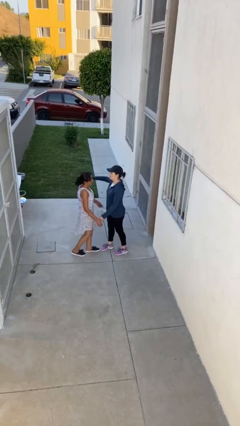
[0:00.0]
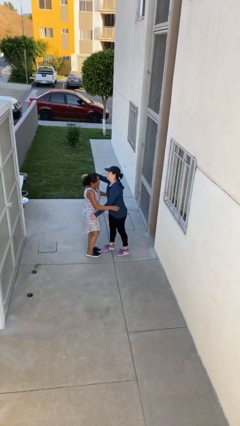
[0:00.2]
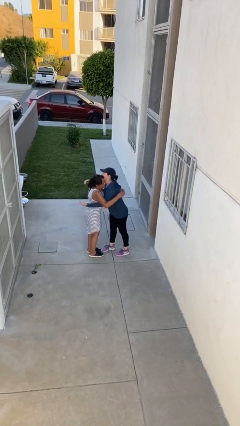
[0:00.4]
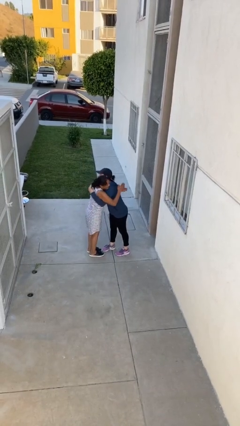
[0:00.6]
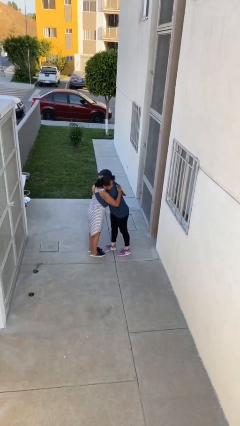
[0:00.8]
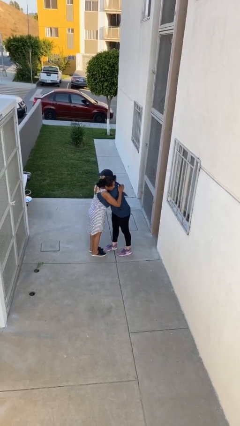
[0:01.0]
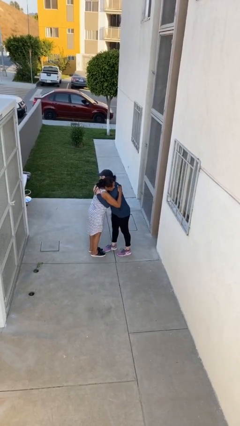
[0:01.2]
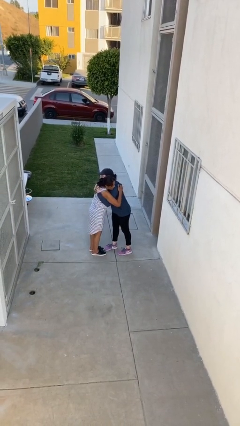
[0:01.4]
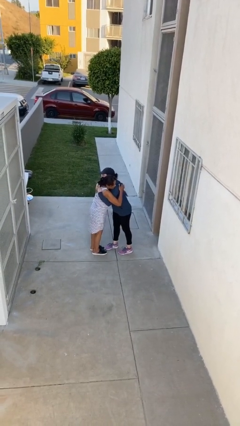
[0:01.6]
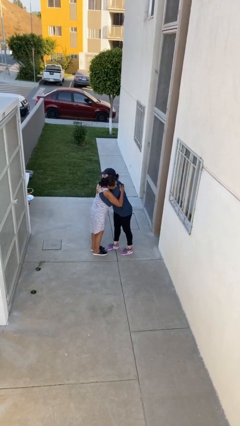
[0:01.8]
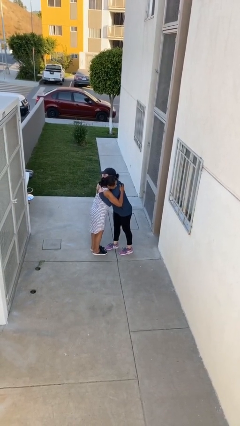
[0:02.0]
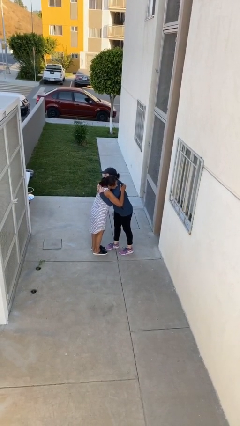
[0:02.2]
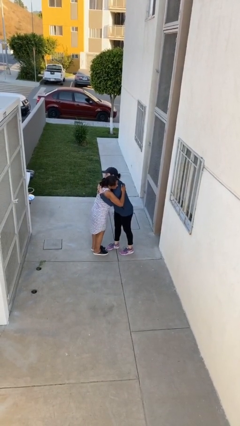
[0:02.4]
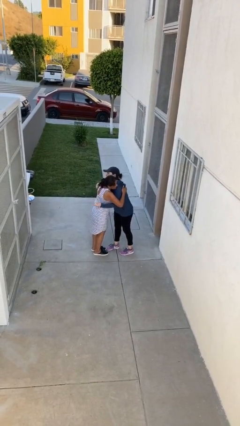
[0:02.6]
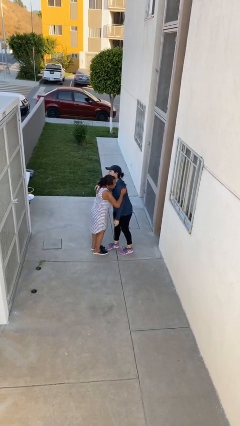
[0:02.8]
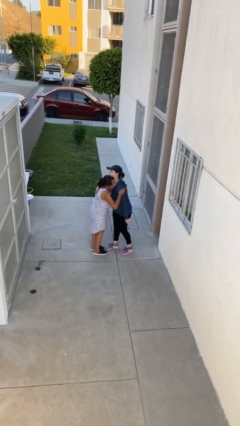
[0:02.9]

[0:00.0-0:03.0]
person embraces person

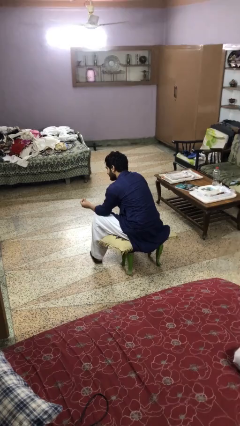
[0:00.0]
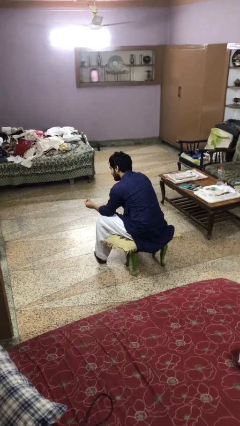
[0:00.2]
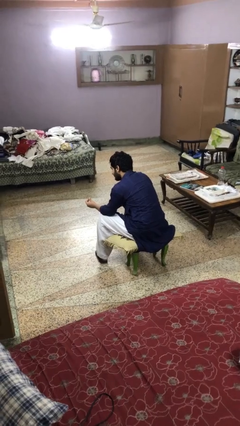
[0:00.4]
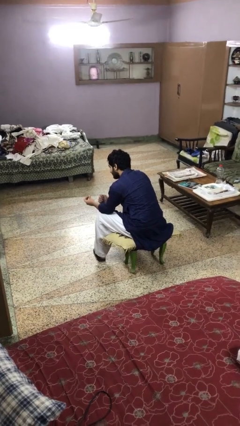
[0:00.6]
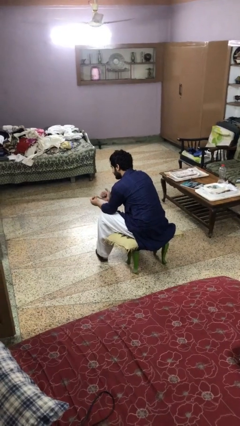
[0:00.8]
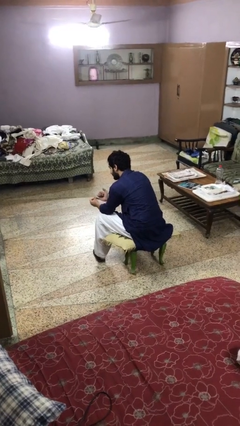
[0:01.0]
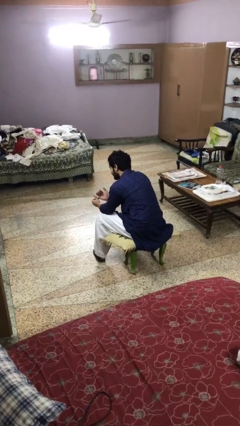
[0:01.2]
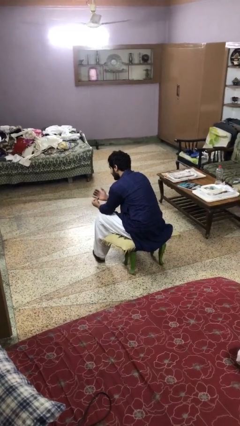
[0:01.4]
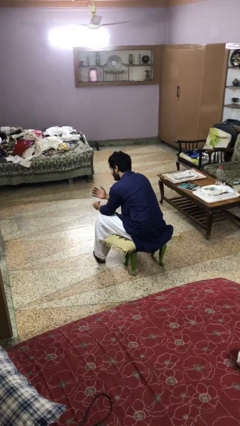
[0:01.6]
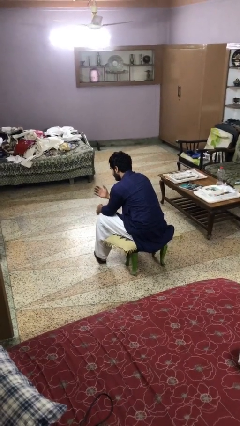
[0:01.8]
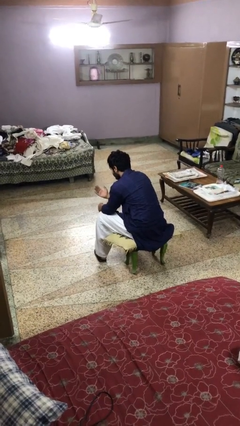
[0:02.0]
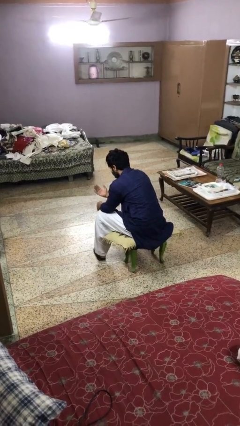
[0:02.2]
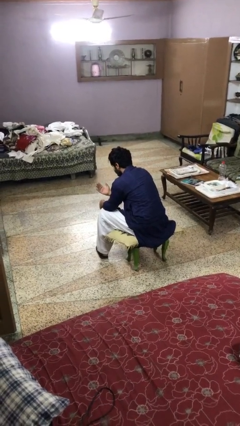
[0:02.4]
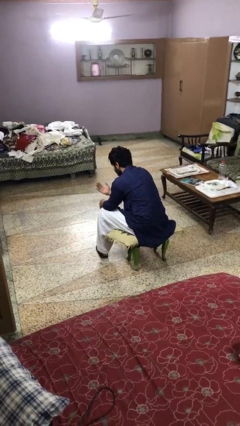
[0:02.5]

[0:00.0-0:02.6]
person puts on ring

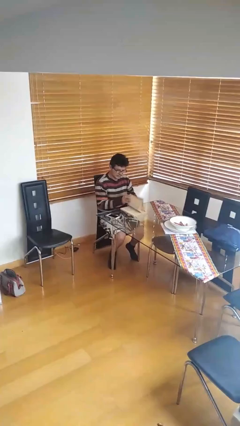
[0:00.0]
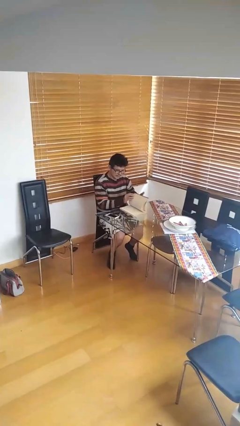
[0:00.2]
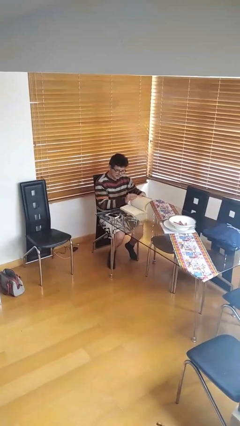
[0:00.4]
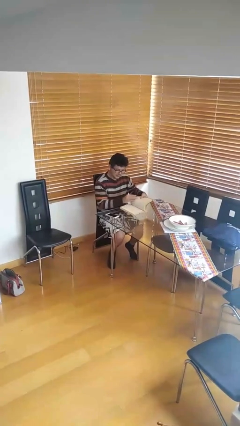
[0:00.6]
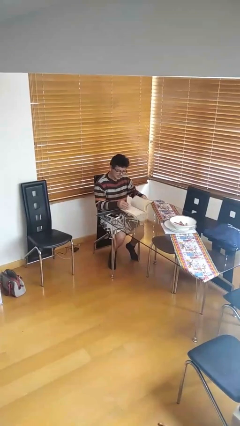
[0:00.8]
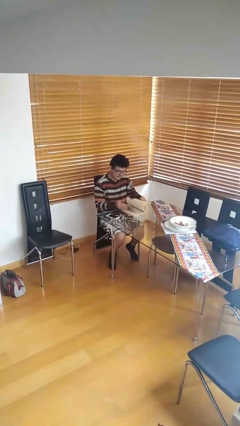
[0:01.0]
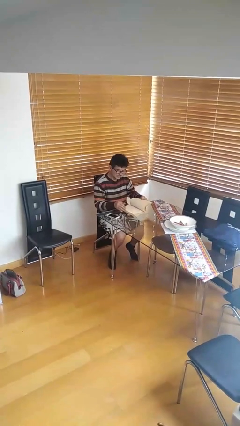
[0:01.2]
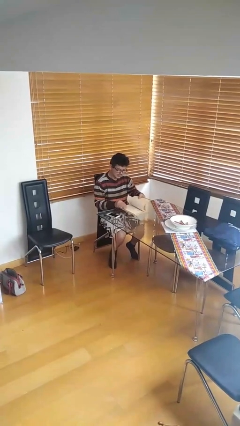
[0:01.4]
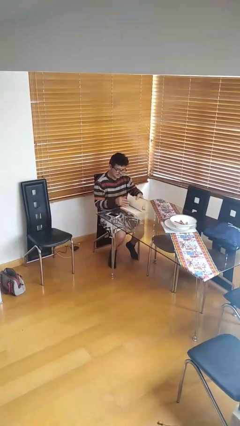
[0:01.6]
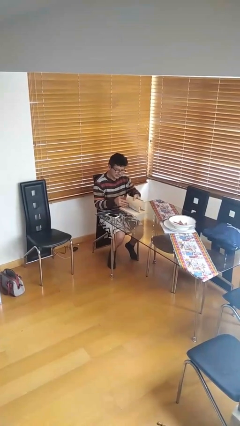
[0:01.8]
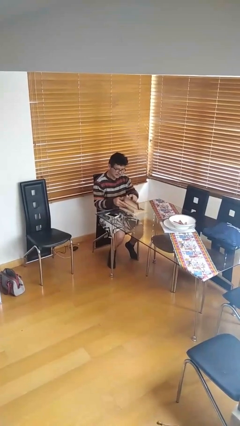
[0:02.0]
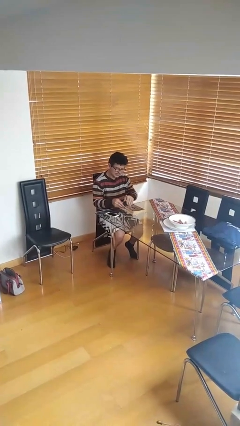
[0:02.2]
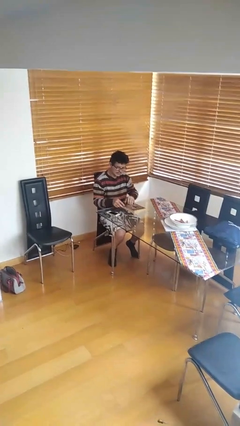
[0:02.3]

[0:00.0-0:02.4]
person reads document

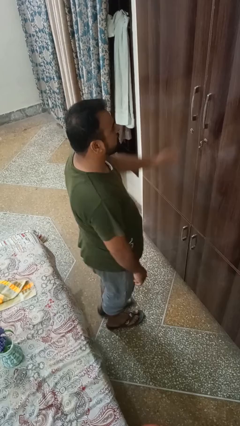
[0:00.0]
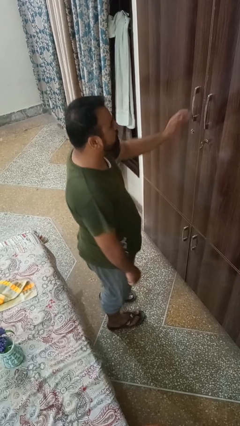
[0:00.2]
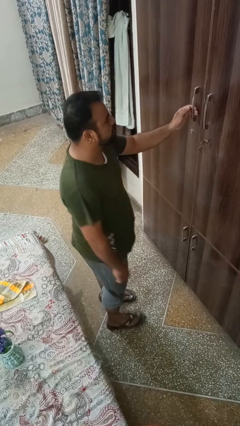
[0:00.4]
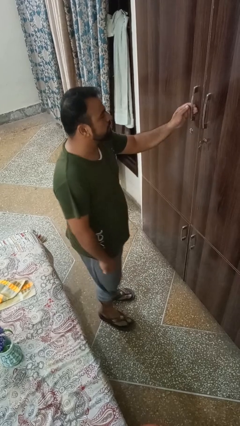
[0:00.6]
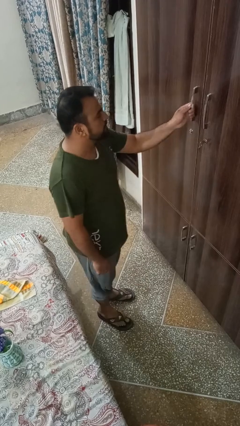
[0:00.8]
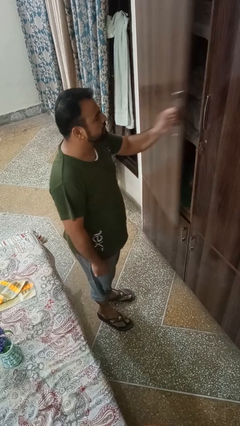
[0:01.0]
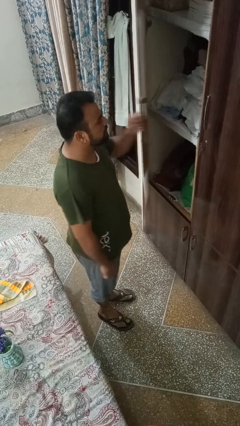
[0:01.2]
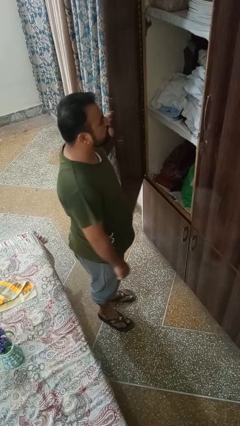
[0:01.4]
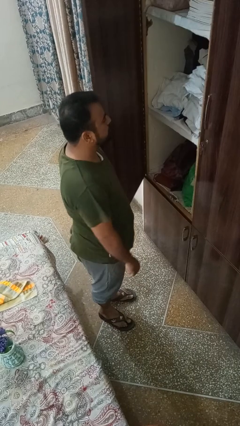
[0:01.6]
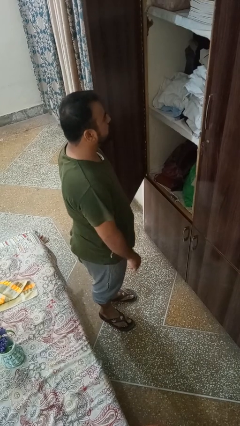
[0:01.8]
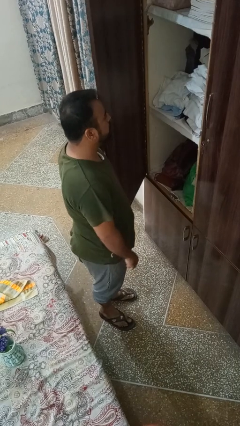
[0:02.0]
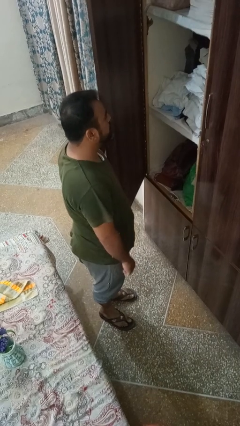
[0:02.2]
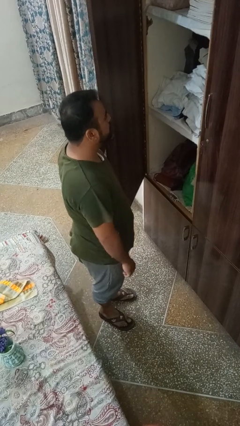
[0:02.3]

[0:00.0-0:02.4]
person opens closet door

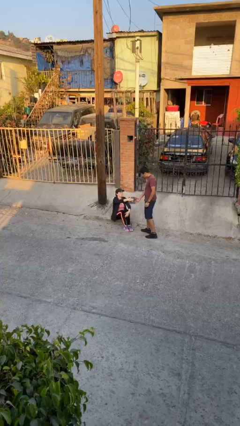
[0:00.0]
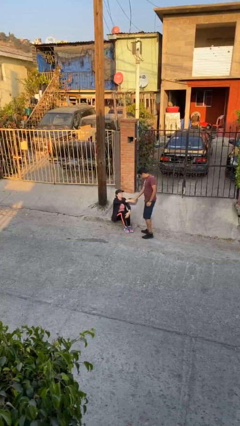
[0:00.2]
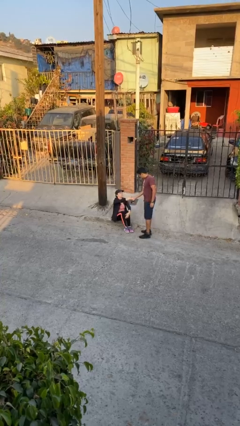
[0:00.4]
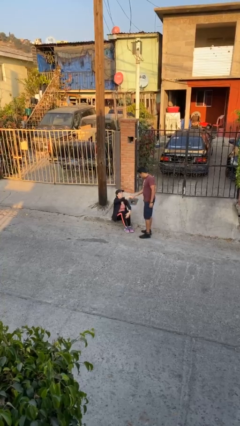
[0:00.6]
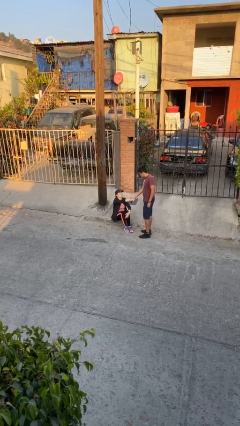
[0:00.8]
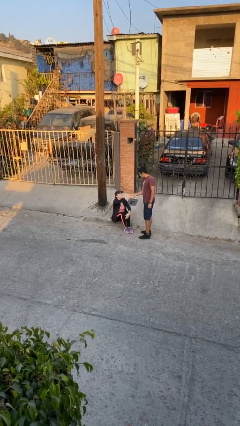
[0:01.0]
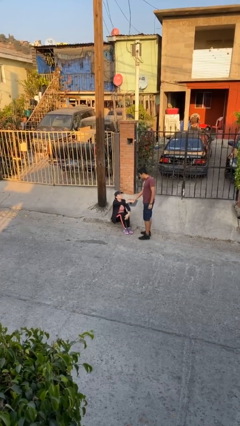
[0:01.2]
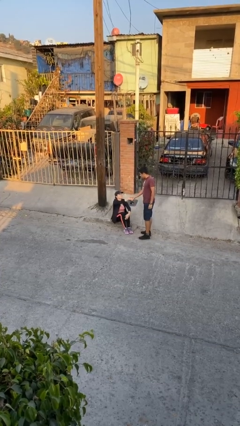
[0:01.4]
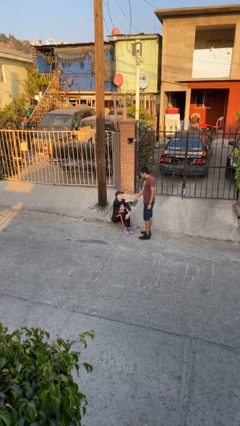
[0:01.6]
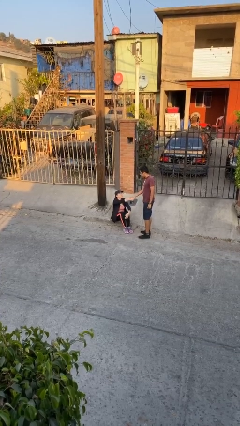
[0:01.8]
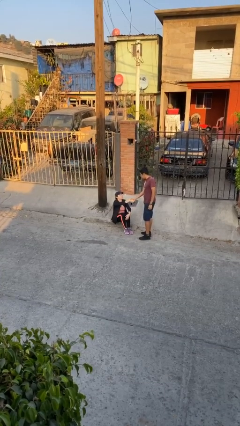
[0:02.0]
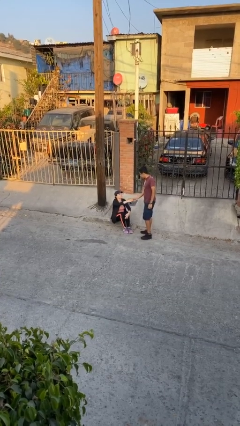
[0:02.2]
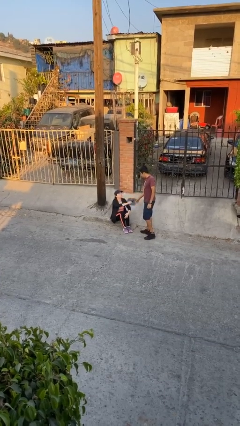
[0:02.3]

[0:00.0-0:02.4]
person shakes hand

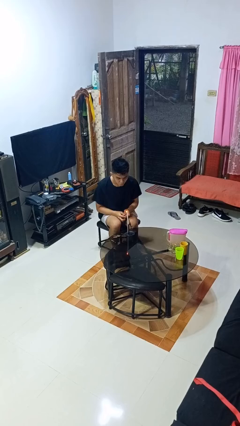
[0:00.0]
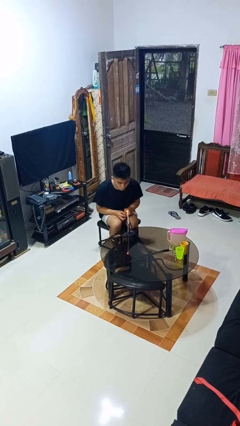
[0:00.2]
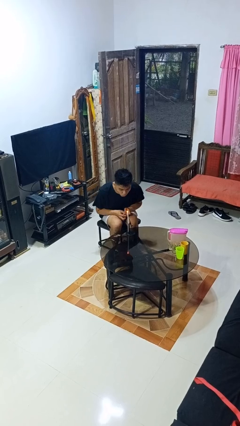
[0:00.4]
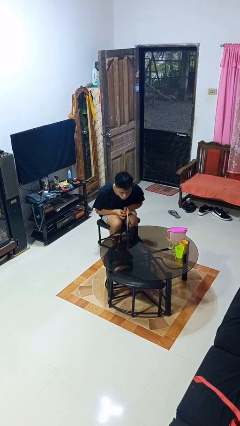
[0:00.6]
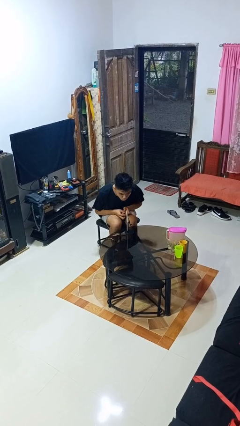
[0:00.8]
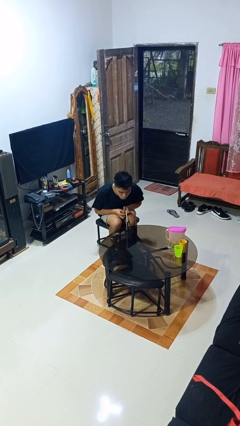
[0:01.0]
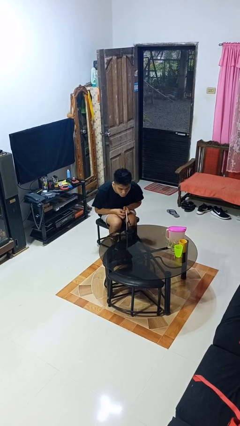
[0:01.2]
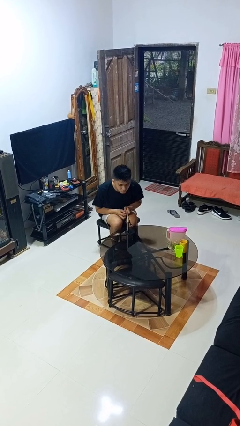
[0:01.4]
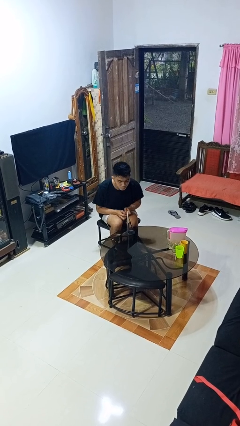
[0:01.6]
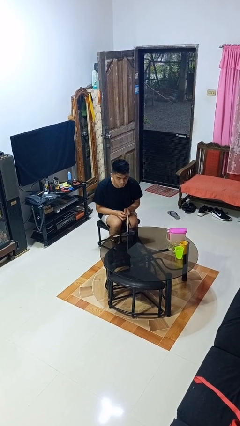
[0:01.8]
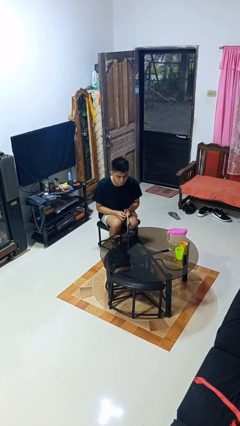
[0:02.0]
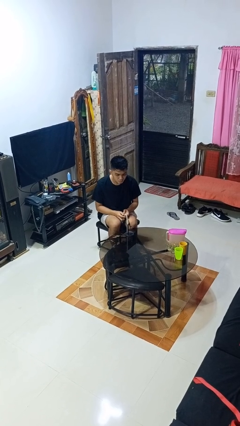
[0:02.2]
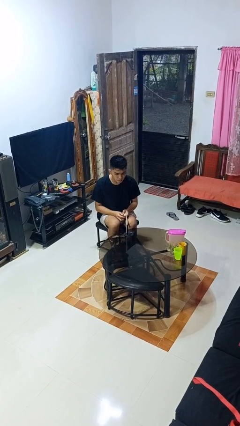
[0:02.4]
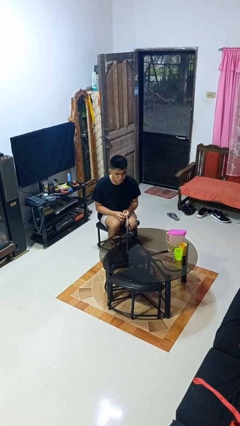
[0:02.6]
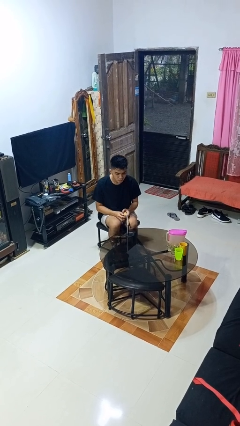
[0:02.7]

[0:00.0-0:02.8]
person extinguishes candle

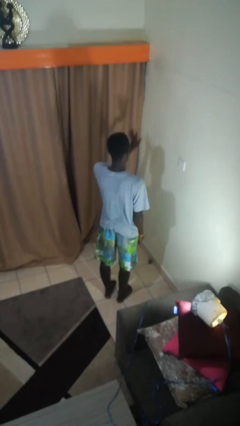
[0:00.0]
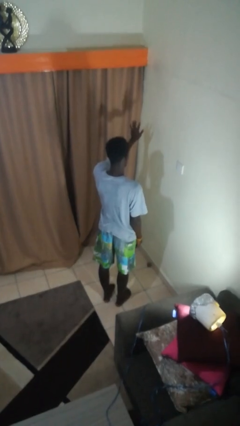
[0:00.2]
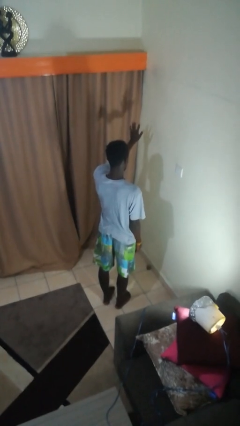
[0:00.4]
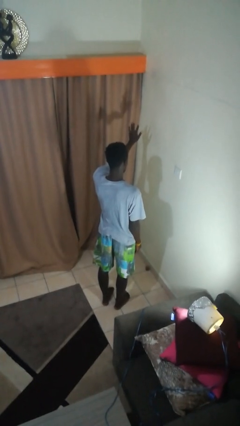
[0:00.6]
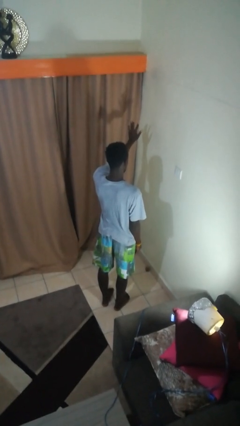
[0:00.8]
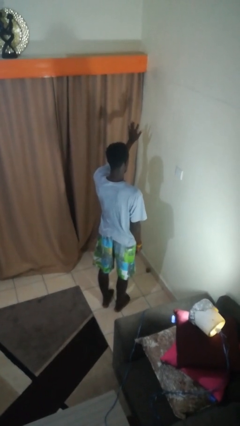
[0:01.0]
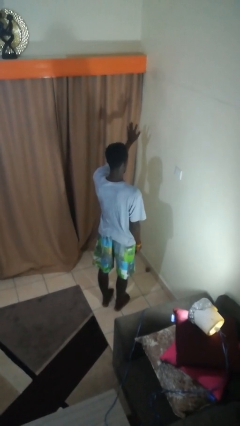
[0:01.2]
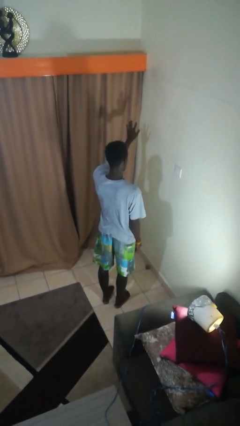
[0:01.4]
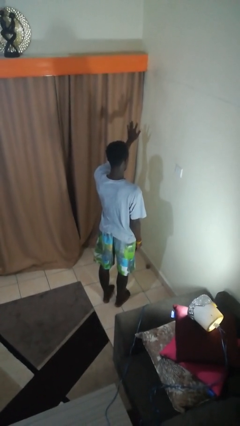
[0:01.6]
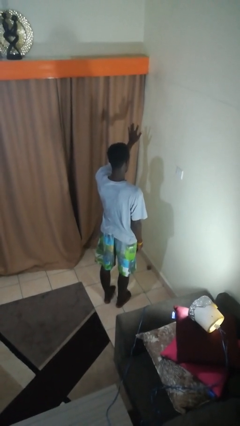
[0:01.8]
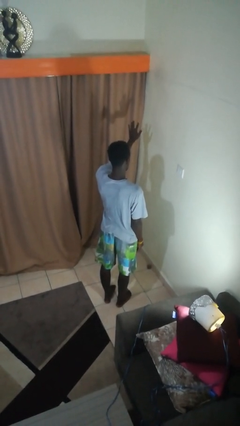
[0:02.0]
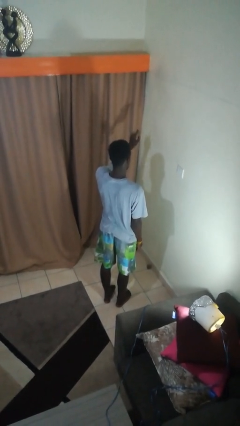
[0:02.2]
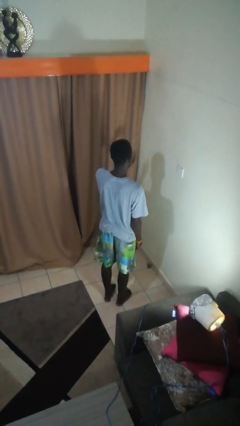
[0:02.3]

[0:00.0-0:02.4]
person gestures number five
